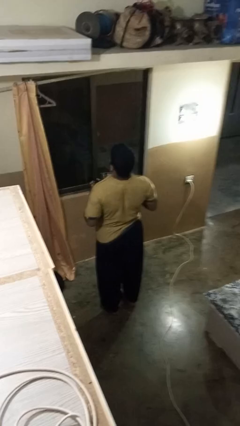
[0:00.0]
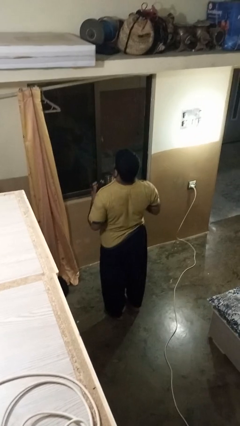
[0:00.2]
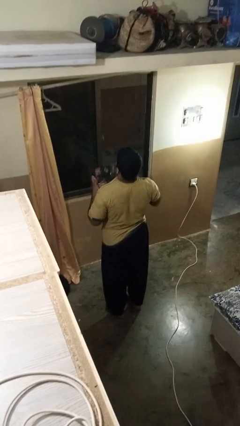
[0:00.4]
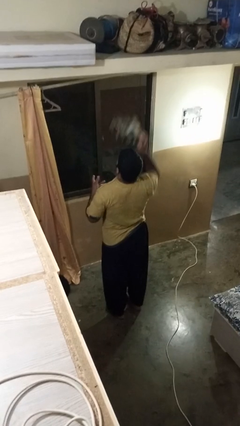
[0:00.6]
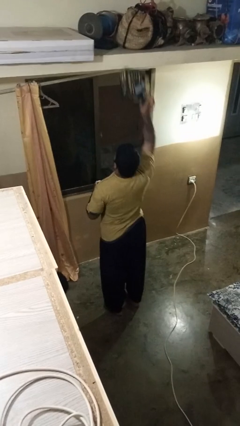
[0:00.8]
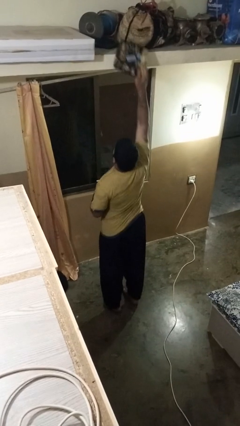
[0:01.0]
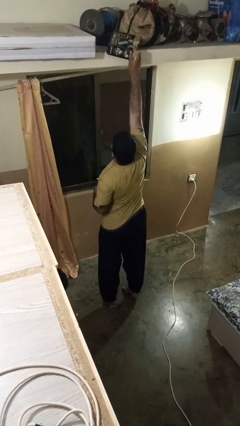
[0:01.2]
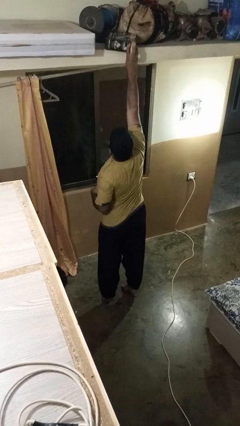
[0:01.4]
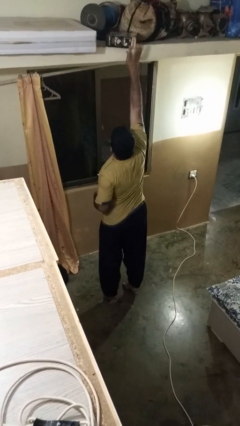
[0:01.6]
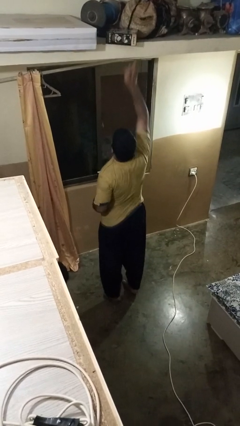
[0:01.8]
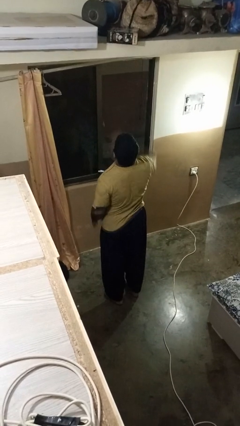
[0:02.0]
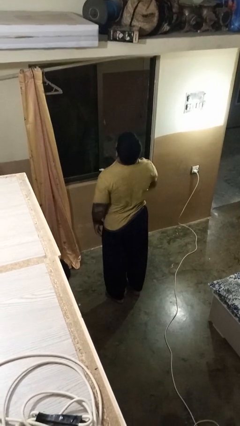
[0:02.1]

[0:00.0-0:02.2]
person puts down object on shelf

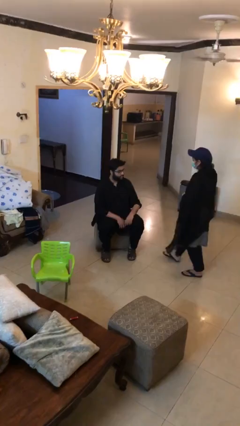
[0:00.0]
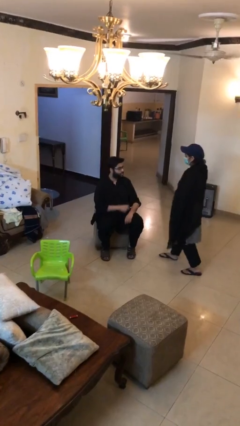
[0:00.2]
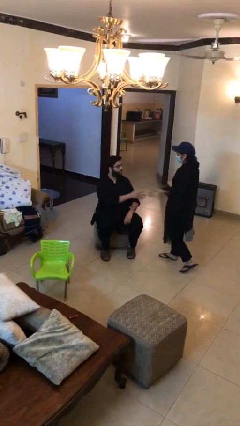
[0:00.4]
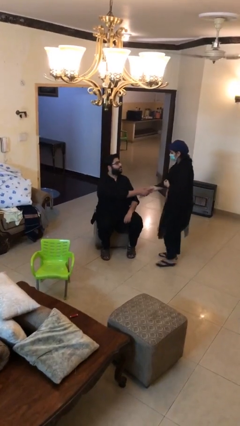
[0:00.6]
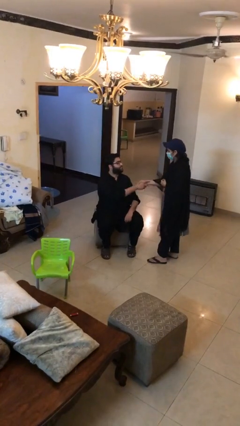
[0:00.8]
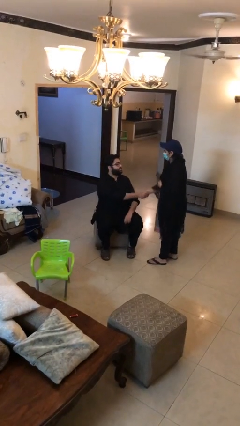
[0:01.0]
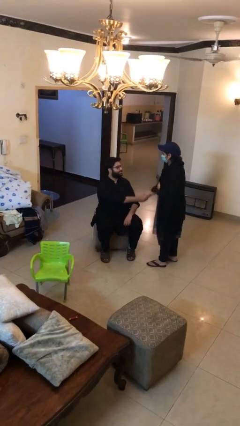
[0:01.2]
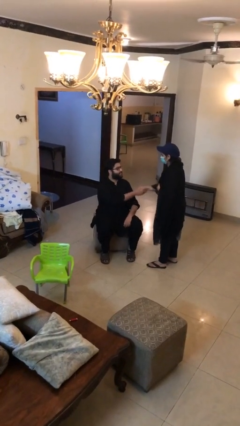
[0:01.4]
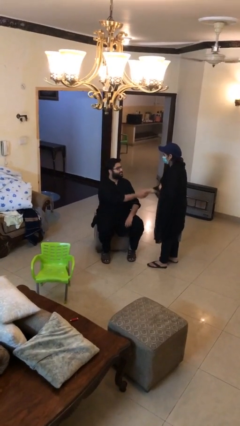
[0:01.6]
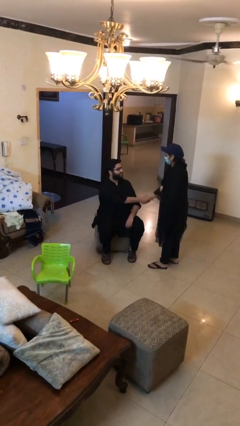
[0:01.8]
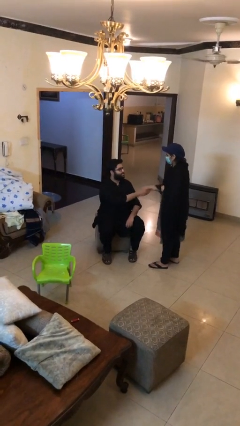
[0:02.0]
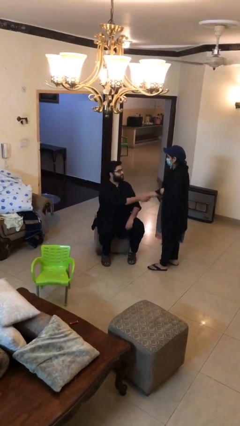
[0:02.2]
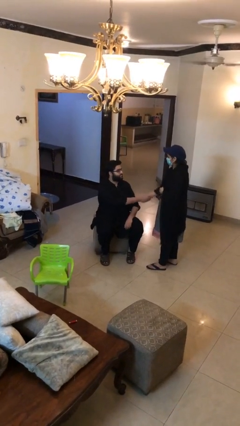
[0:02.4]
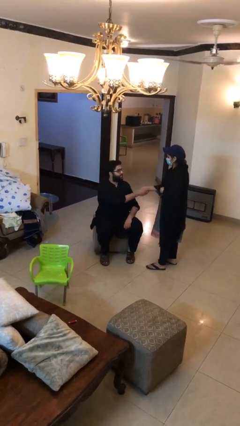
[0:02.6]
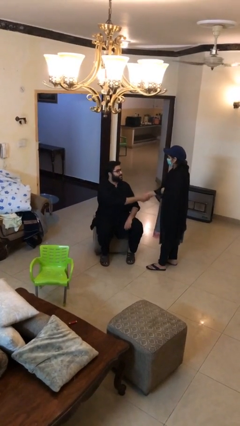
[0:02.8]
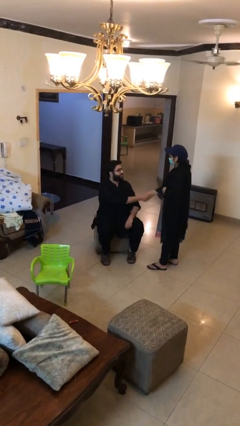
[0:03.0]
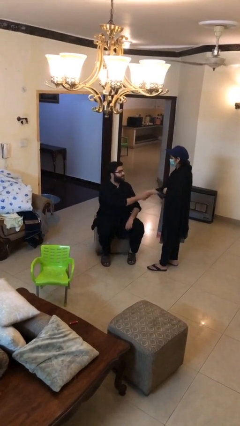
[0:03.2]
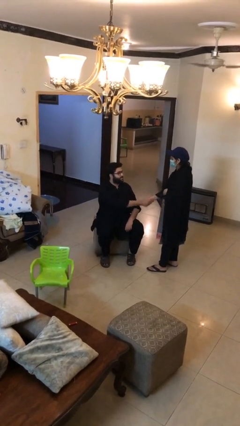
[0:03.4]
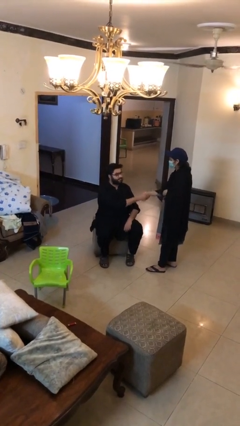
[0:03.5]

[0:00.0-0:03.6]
person shakes hand

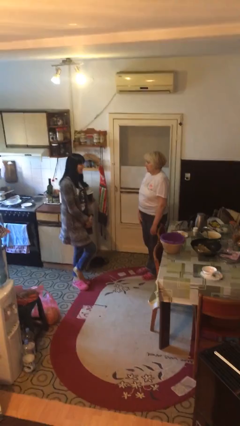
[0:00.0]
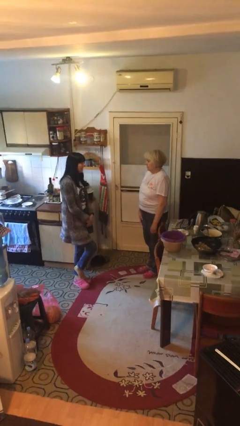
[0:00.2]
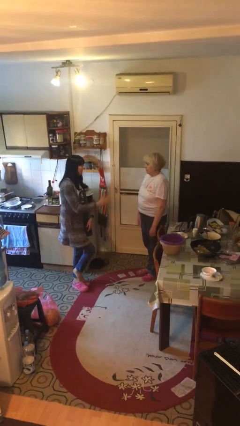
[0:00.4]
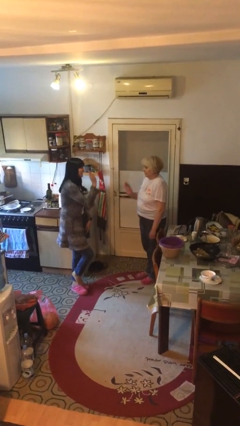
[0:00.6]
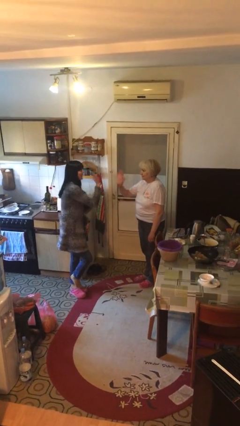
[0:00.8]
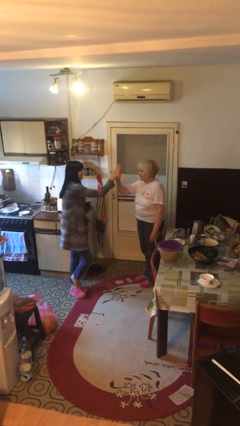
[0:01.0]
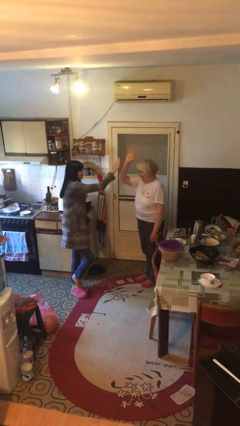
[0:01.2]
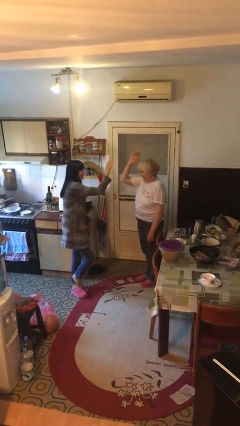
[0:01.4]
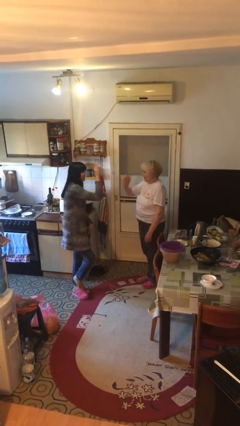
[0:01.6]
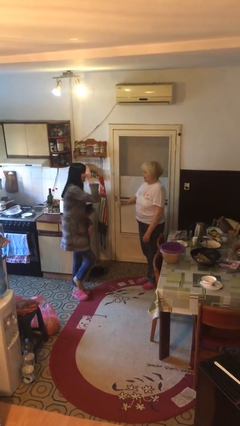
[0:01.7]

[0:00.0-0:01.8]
person highfives hand

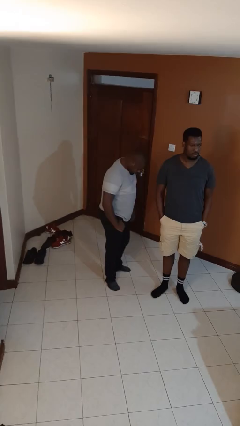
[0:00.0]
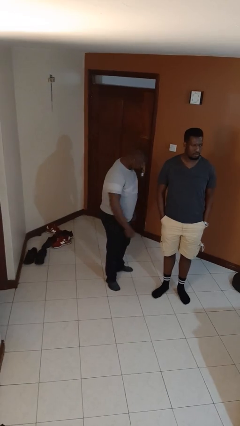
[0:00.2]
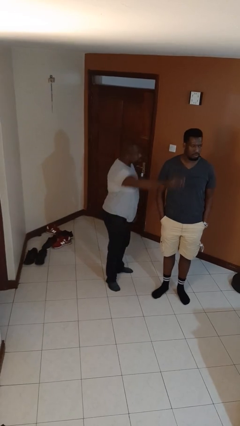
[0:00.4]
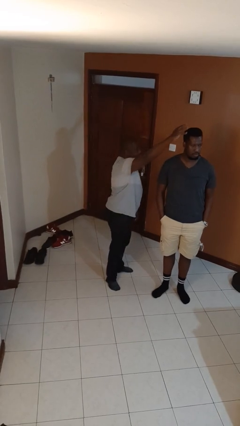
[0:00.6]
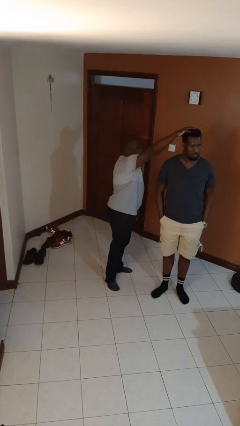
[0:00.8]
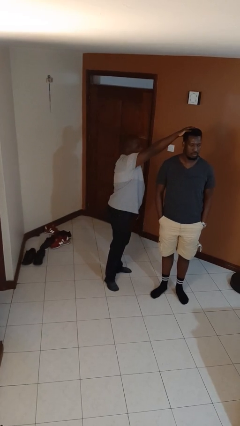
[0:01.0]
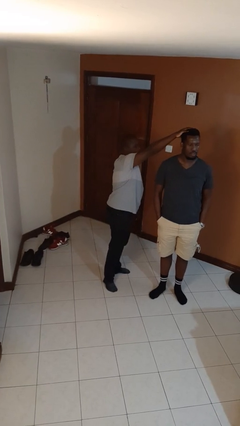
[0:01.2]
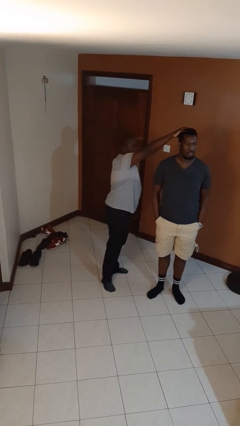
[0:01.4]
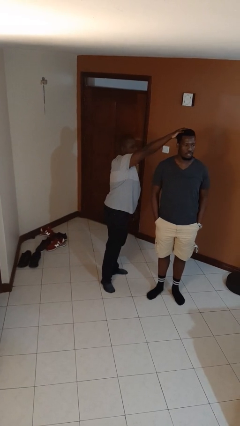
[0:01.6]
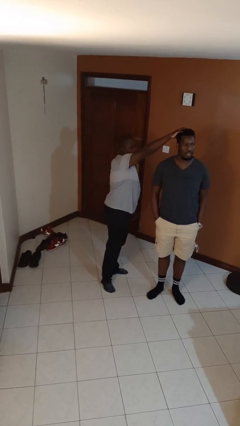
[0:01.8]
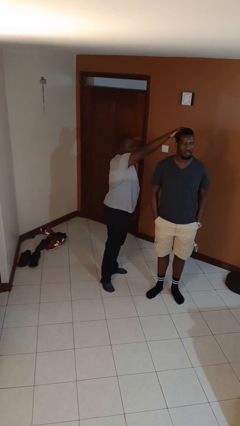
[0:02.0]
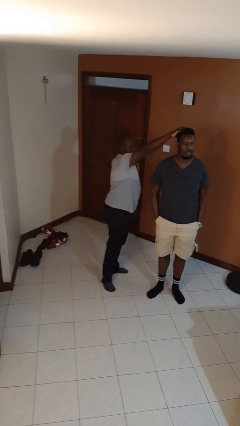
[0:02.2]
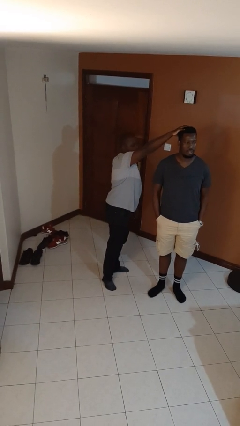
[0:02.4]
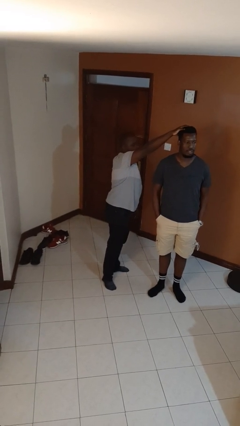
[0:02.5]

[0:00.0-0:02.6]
person grabs person by hair

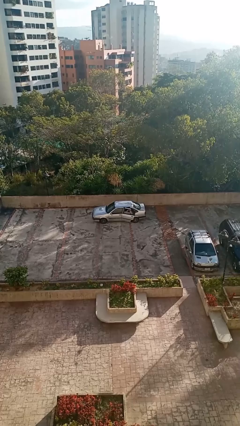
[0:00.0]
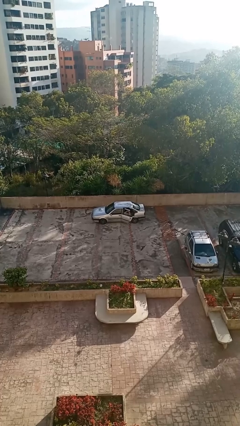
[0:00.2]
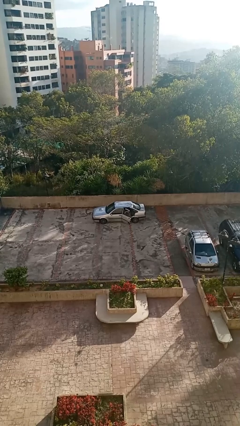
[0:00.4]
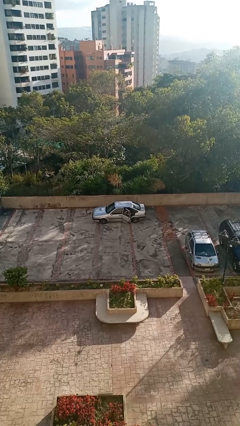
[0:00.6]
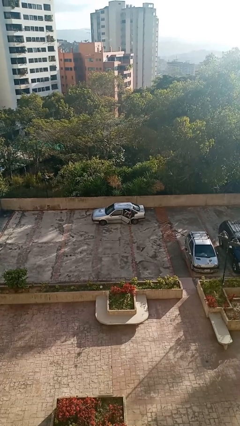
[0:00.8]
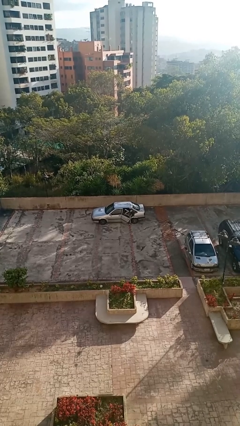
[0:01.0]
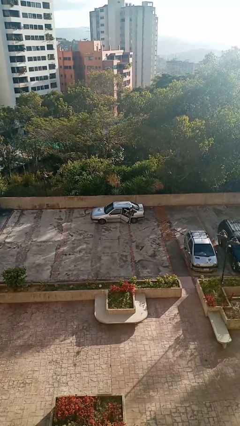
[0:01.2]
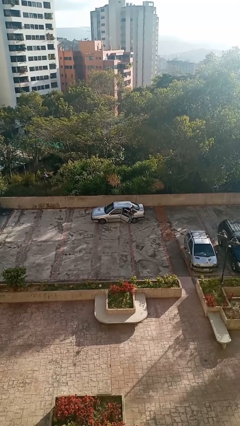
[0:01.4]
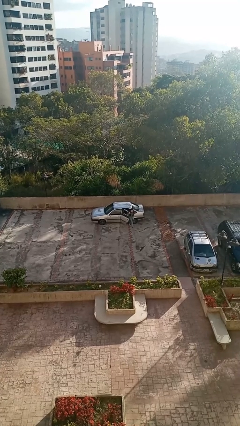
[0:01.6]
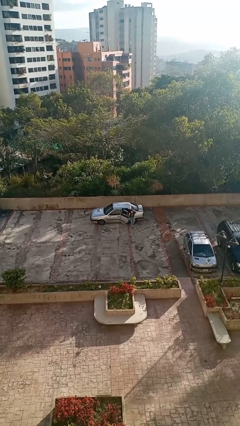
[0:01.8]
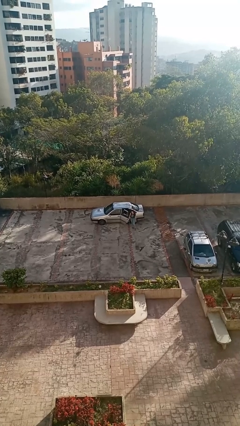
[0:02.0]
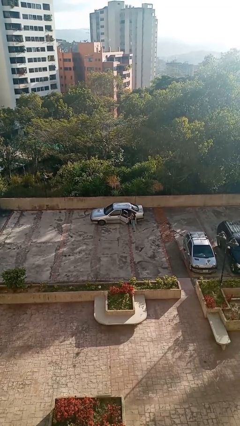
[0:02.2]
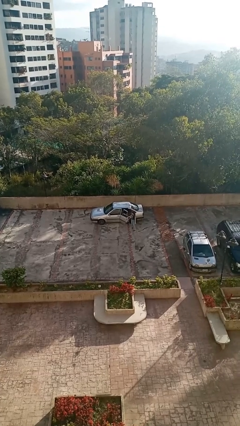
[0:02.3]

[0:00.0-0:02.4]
car drops off person

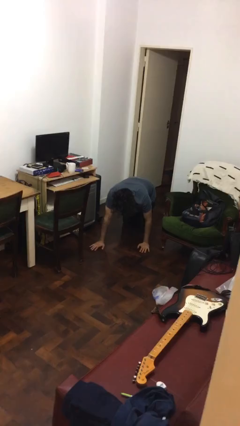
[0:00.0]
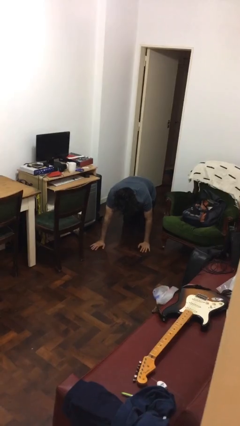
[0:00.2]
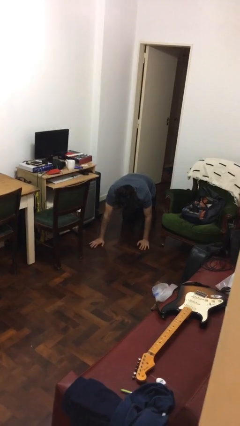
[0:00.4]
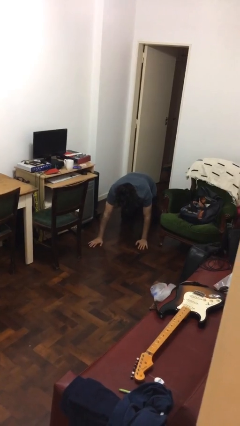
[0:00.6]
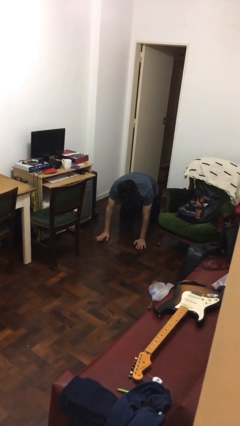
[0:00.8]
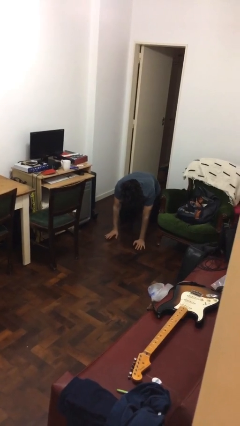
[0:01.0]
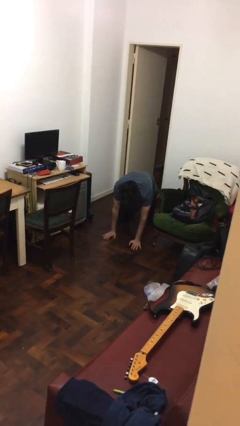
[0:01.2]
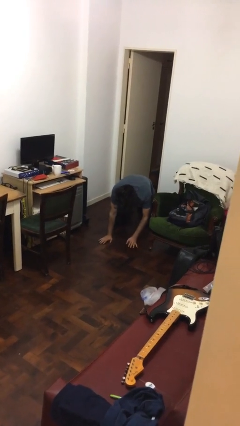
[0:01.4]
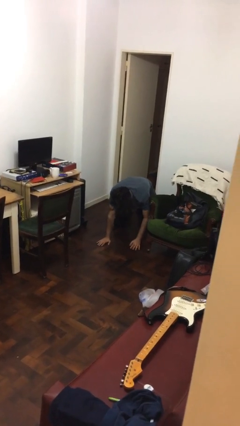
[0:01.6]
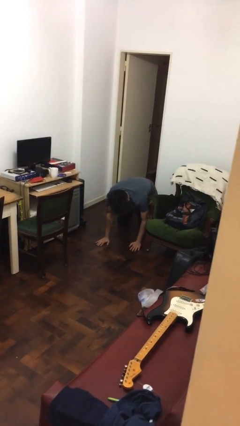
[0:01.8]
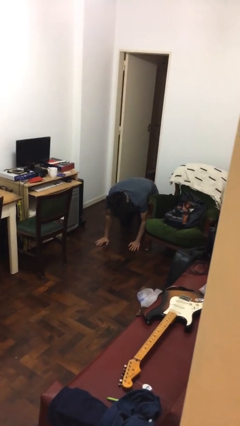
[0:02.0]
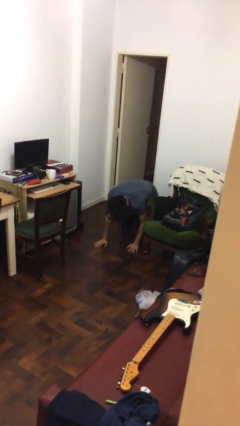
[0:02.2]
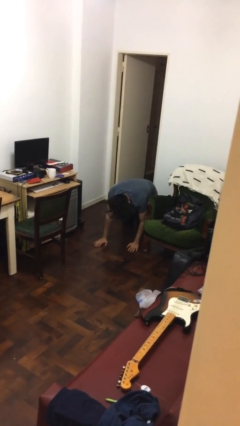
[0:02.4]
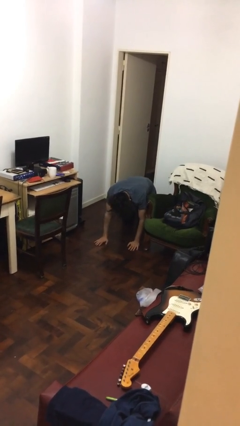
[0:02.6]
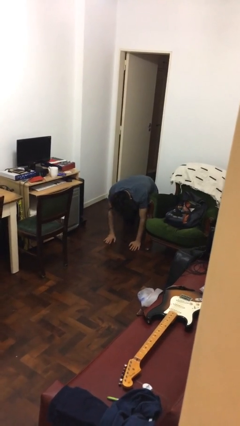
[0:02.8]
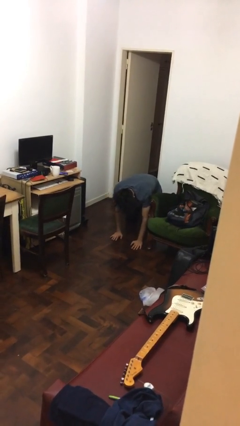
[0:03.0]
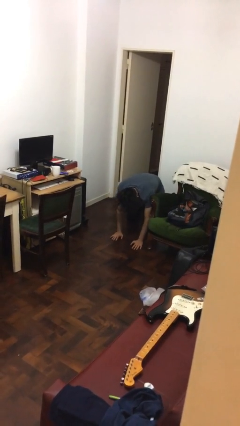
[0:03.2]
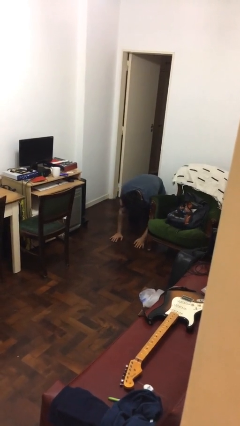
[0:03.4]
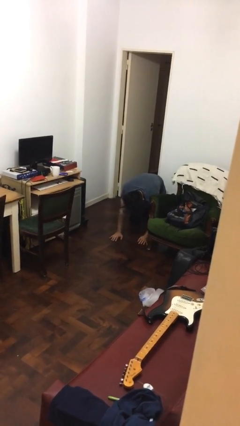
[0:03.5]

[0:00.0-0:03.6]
person crawls

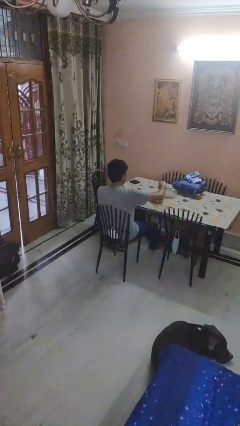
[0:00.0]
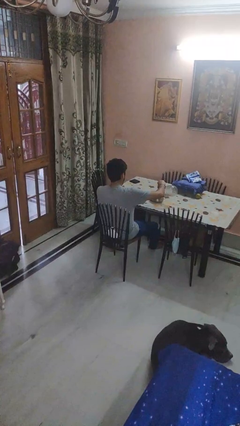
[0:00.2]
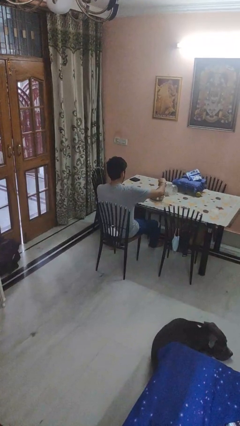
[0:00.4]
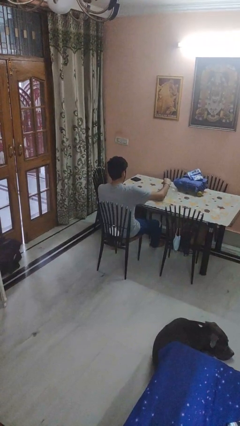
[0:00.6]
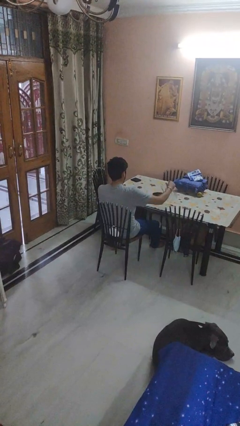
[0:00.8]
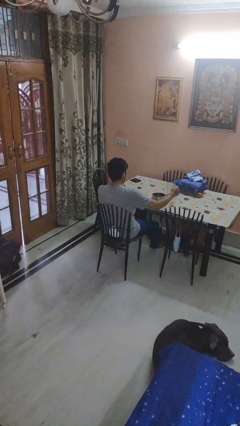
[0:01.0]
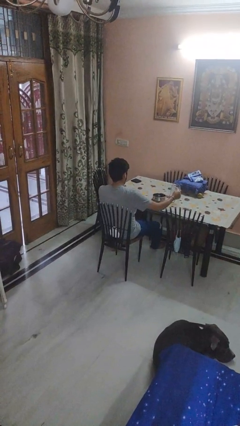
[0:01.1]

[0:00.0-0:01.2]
person pours into bowl
